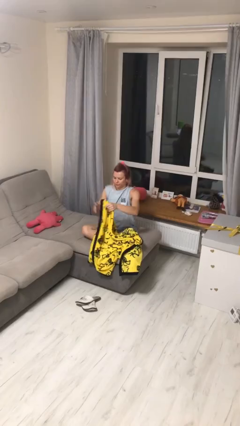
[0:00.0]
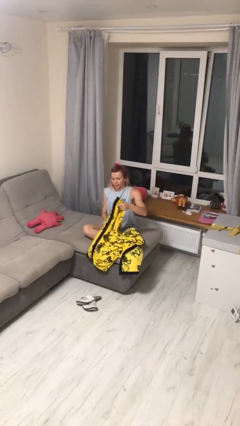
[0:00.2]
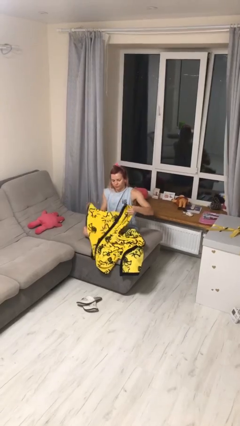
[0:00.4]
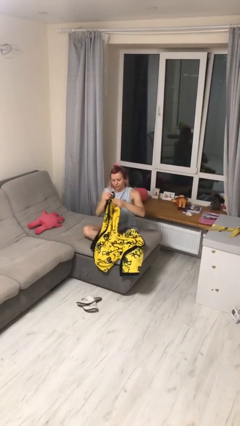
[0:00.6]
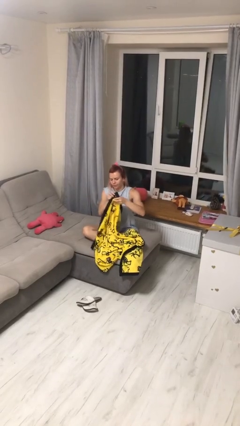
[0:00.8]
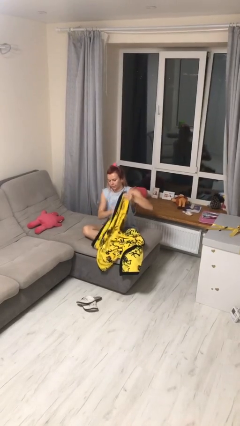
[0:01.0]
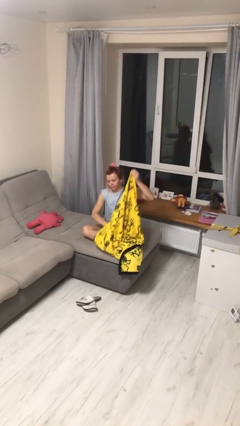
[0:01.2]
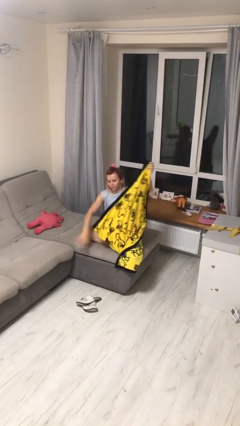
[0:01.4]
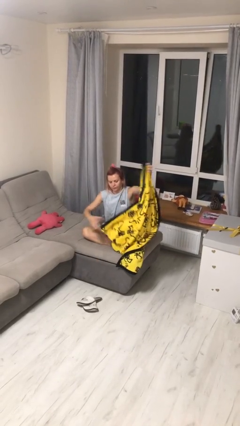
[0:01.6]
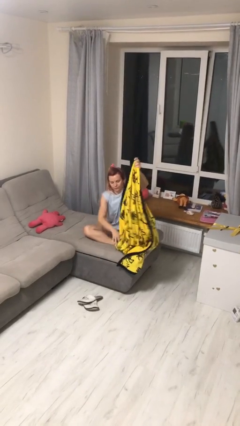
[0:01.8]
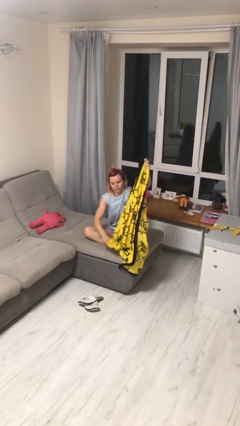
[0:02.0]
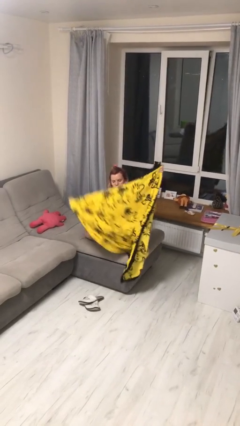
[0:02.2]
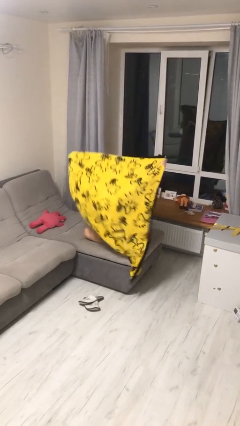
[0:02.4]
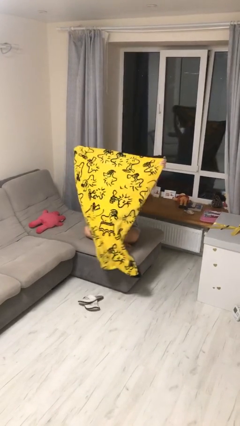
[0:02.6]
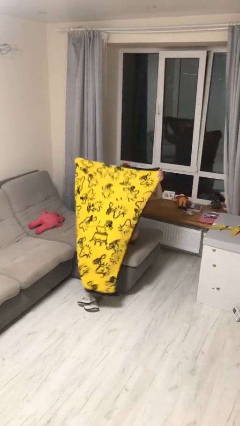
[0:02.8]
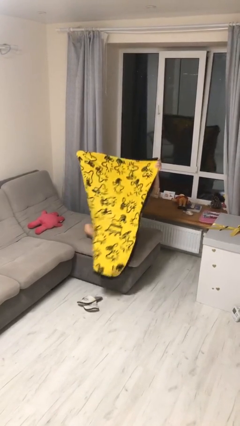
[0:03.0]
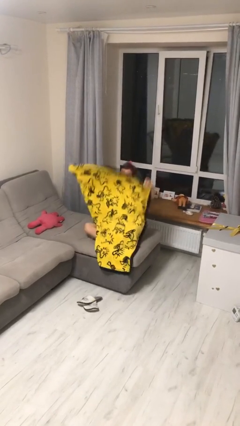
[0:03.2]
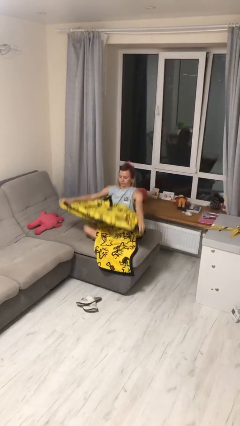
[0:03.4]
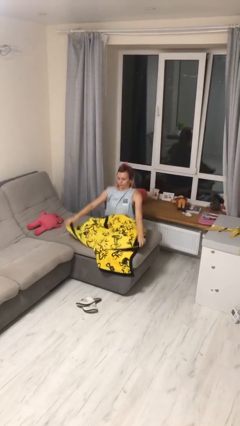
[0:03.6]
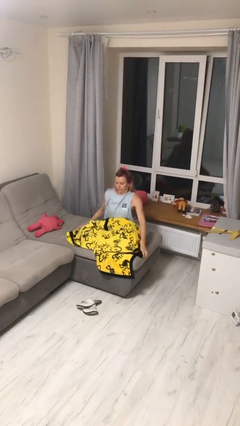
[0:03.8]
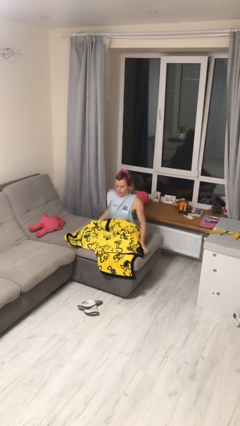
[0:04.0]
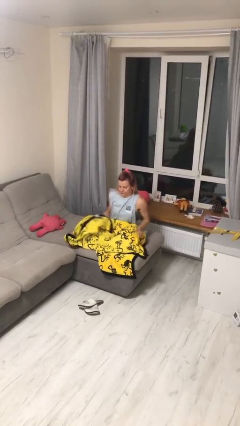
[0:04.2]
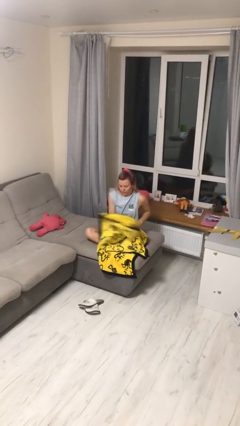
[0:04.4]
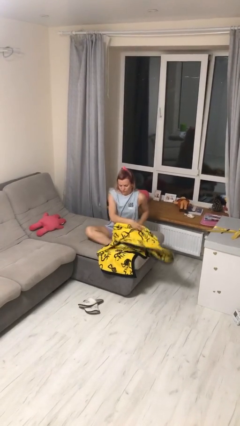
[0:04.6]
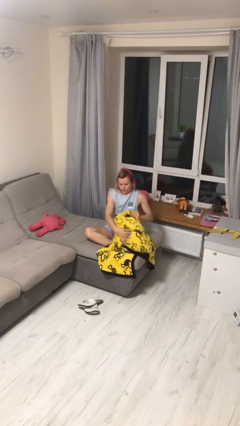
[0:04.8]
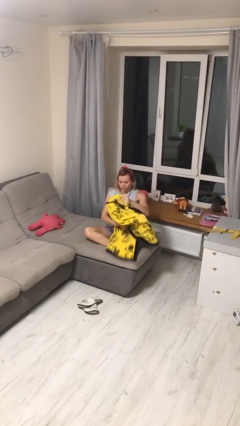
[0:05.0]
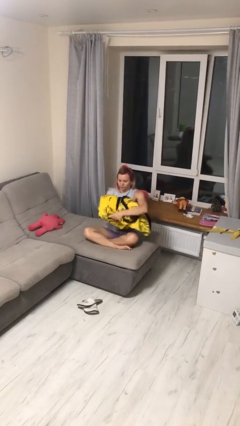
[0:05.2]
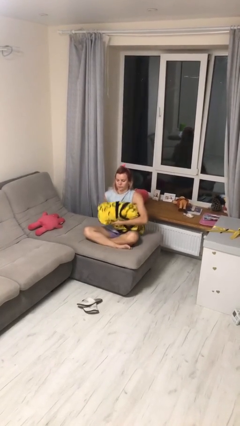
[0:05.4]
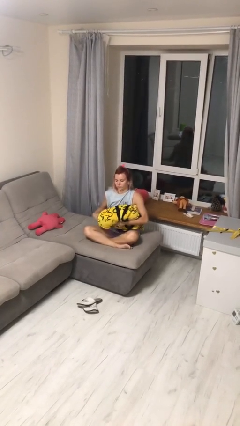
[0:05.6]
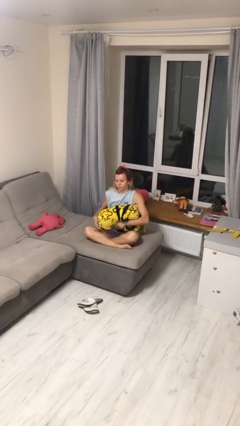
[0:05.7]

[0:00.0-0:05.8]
person folds blanket

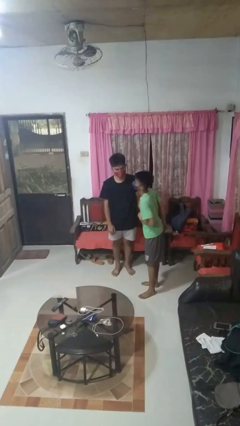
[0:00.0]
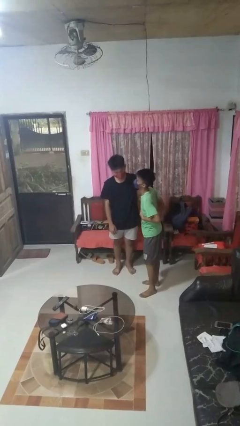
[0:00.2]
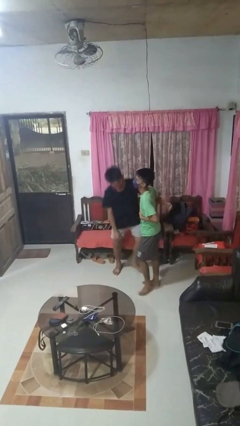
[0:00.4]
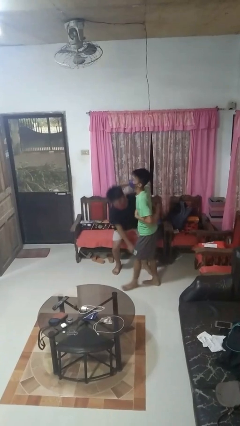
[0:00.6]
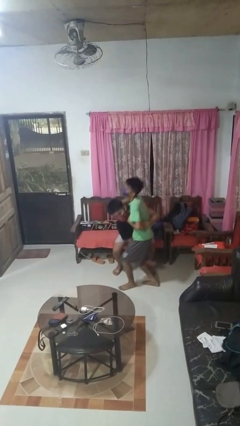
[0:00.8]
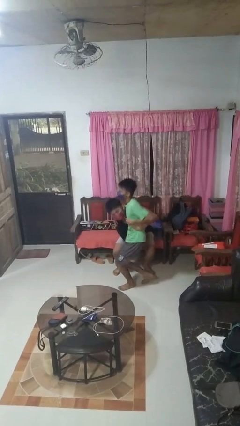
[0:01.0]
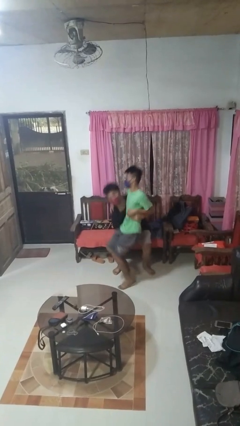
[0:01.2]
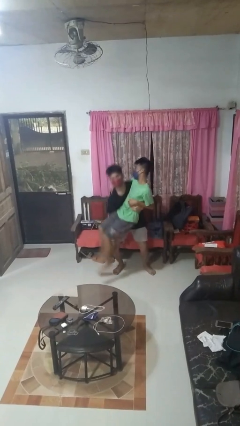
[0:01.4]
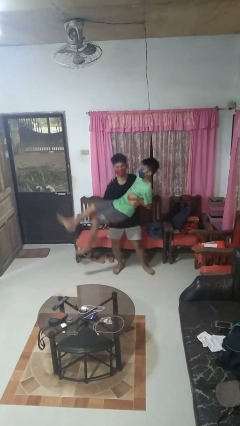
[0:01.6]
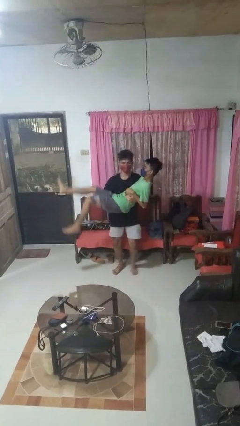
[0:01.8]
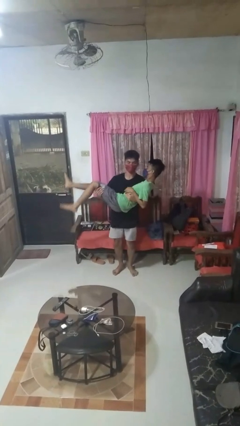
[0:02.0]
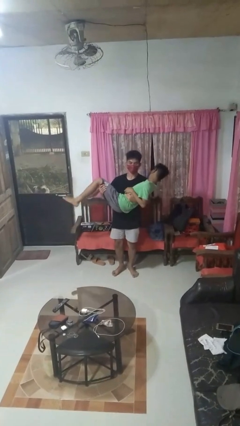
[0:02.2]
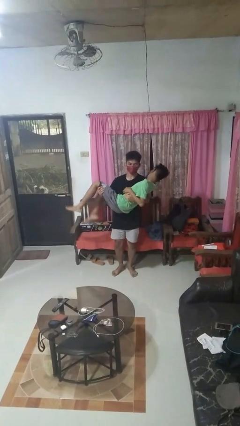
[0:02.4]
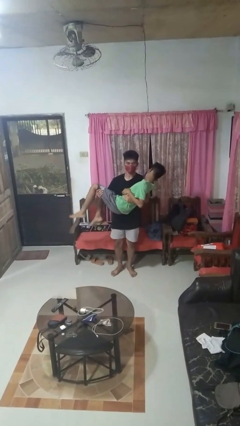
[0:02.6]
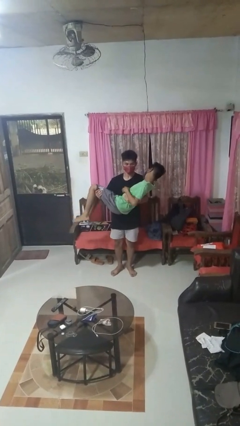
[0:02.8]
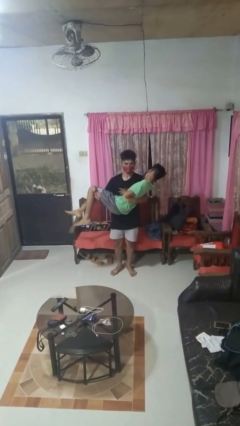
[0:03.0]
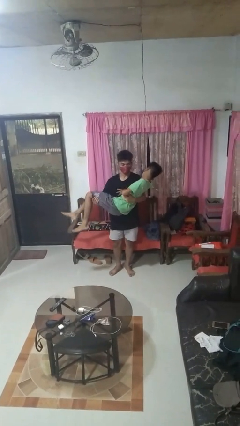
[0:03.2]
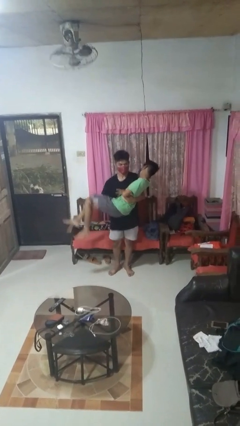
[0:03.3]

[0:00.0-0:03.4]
person picks up person

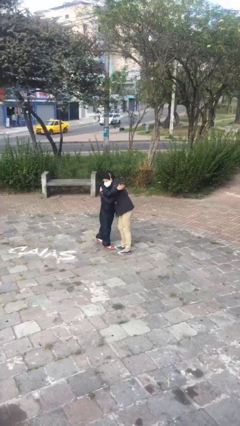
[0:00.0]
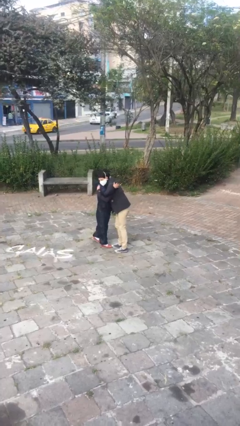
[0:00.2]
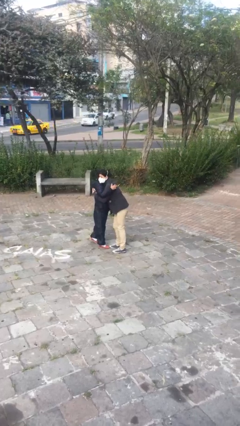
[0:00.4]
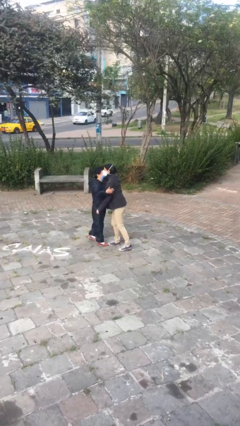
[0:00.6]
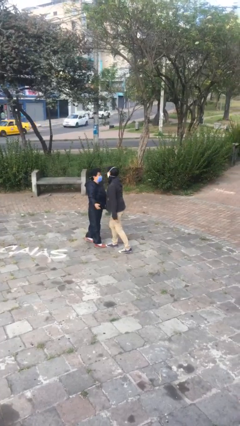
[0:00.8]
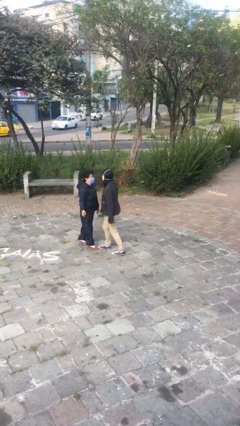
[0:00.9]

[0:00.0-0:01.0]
person embraces person

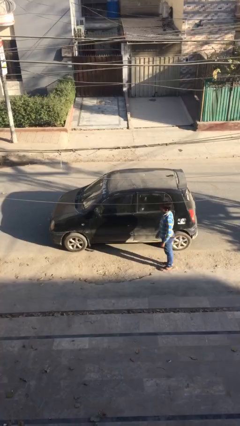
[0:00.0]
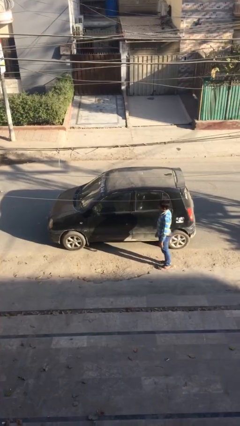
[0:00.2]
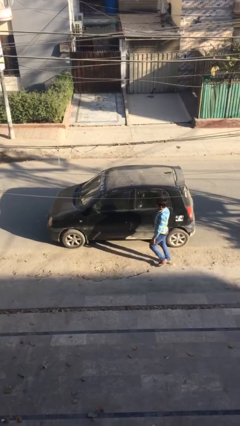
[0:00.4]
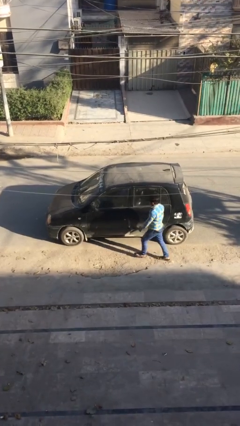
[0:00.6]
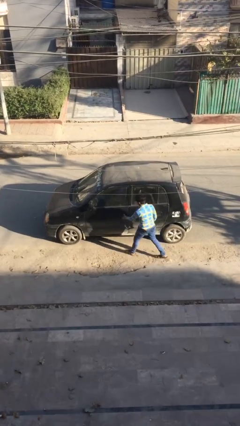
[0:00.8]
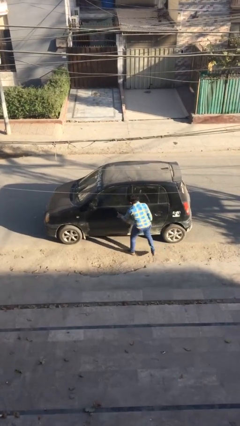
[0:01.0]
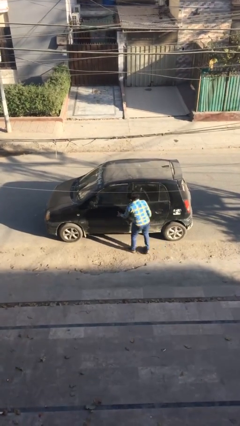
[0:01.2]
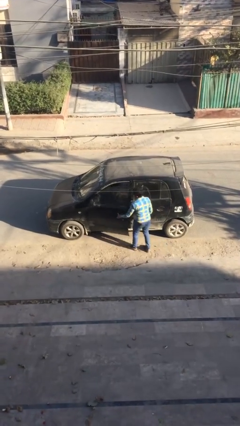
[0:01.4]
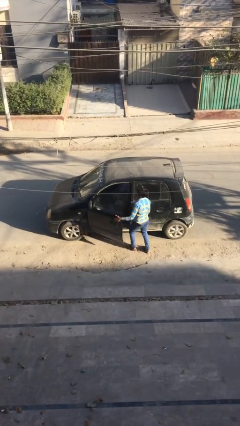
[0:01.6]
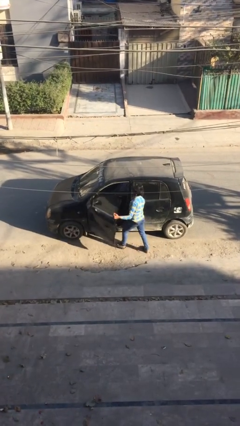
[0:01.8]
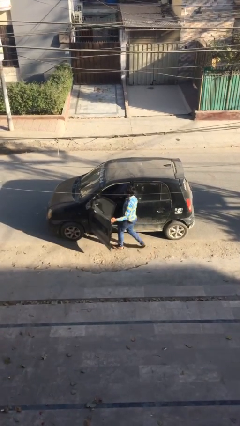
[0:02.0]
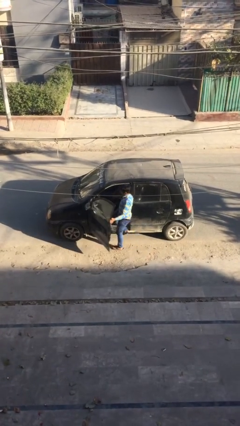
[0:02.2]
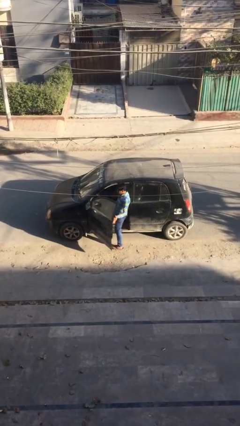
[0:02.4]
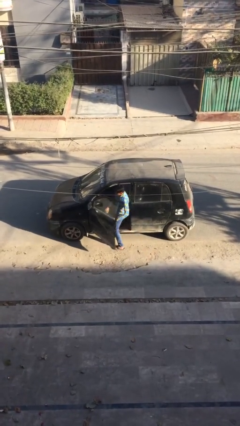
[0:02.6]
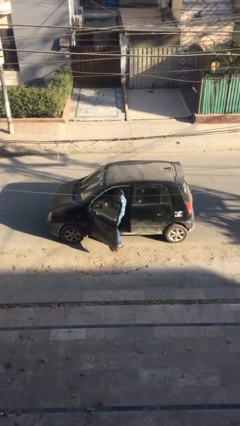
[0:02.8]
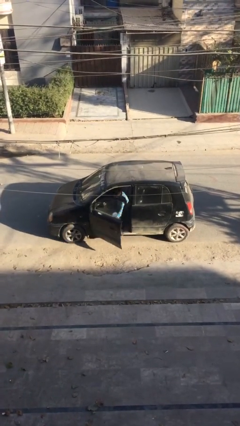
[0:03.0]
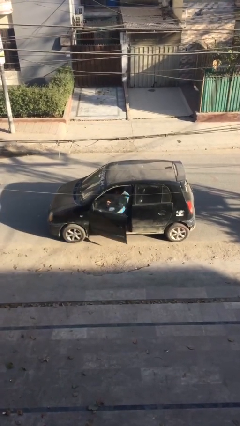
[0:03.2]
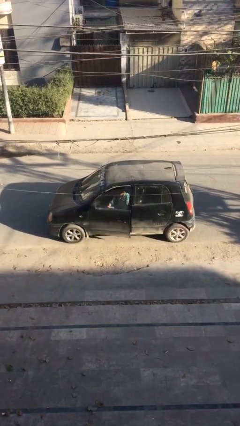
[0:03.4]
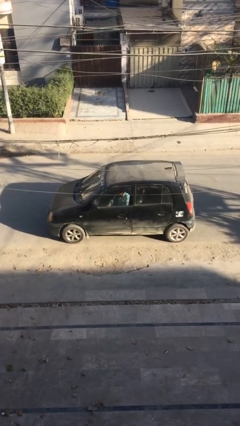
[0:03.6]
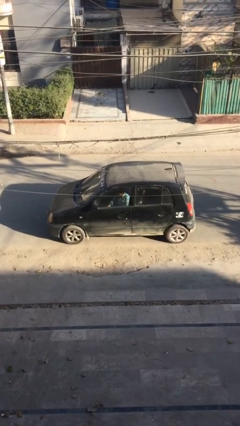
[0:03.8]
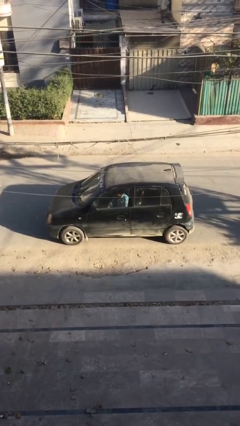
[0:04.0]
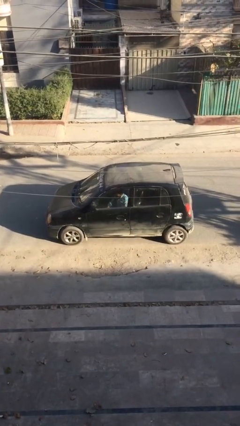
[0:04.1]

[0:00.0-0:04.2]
car picks up person

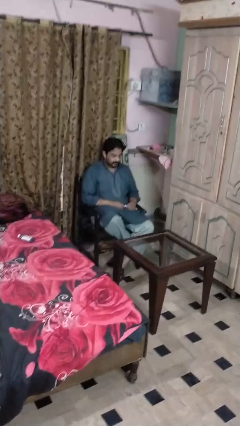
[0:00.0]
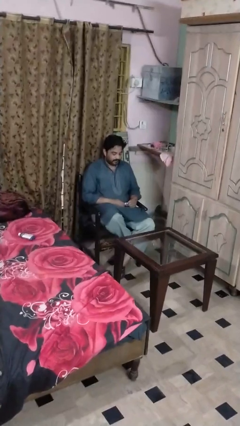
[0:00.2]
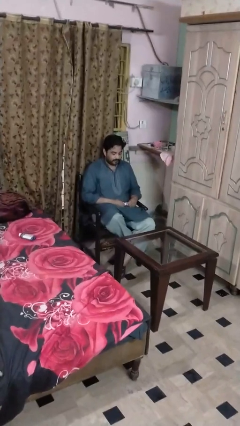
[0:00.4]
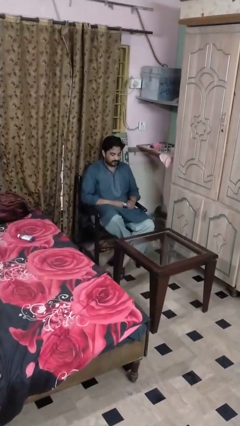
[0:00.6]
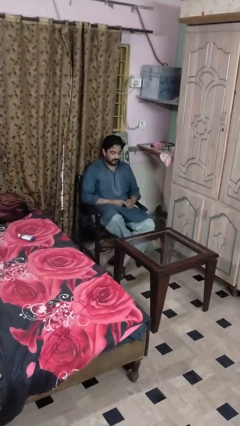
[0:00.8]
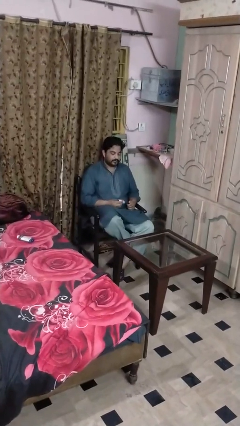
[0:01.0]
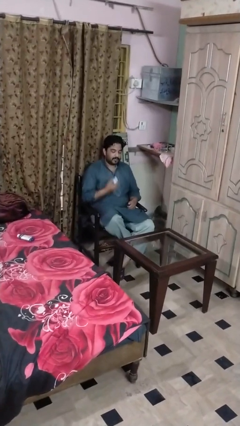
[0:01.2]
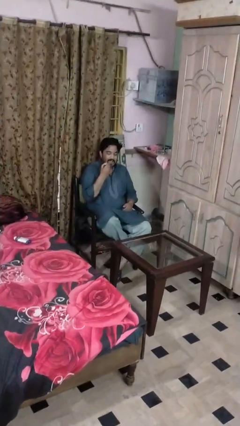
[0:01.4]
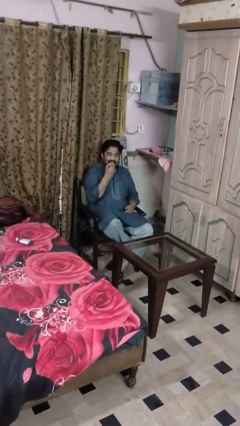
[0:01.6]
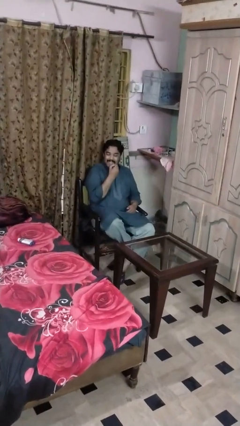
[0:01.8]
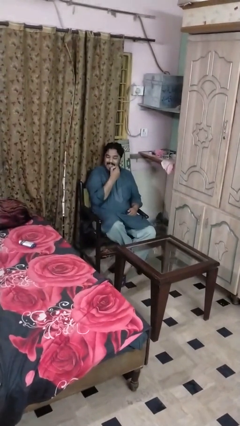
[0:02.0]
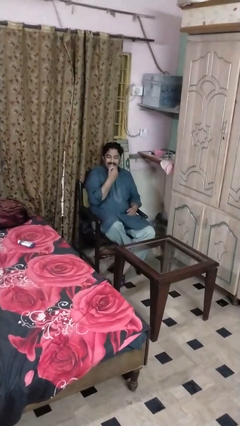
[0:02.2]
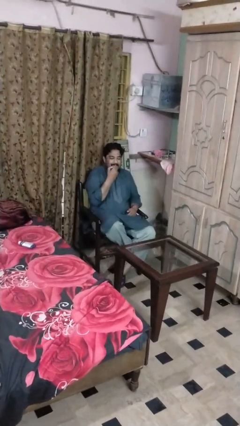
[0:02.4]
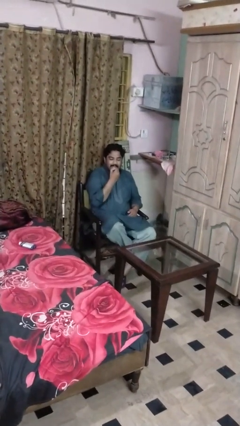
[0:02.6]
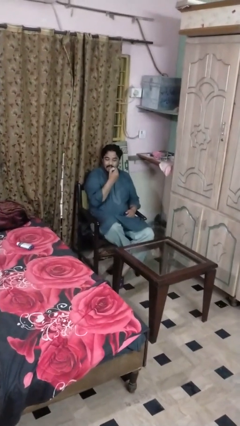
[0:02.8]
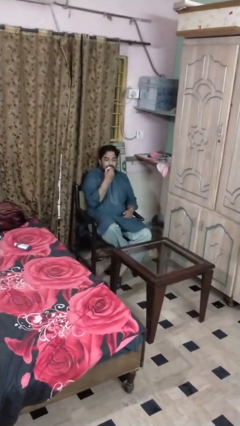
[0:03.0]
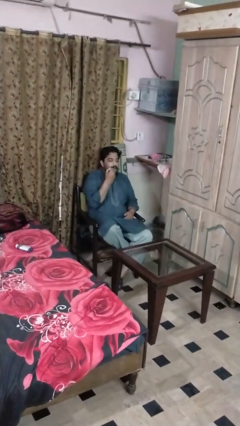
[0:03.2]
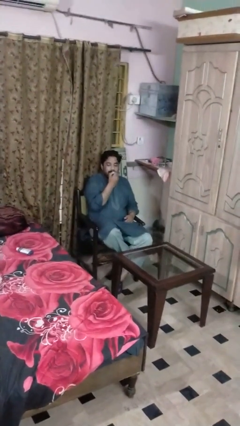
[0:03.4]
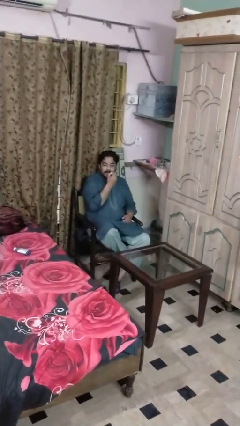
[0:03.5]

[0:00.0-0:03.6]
person applies lip makeup
